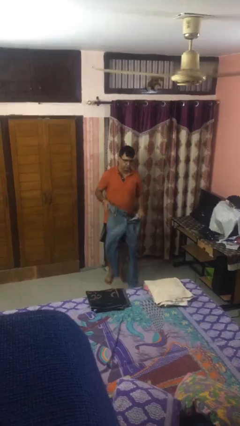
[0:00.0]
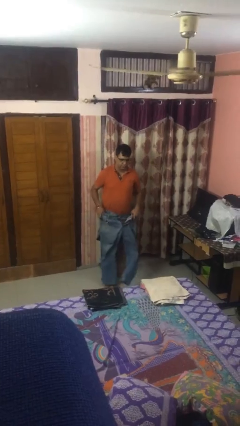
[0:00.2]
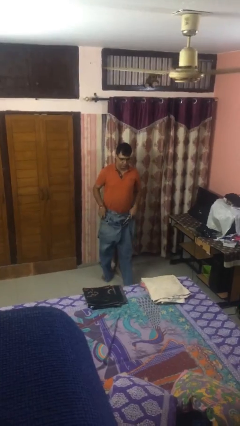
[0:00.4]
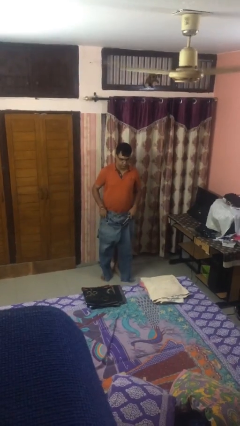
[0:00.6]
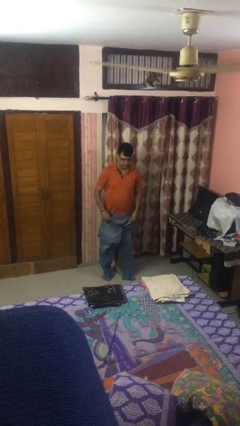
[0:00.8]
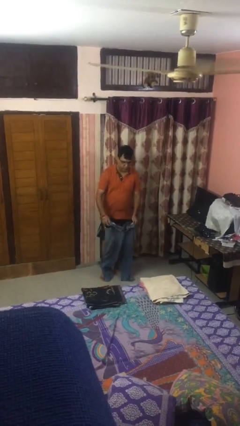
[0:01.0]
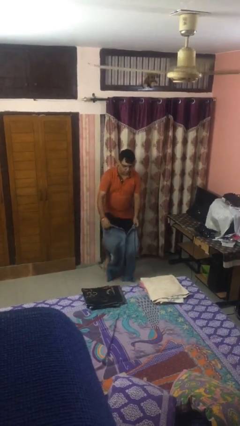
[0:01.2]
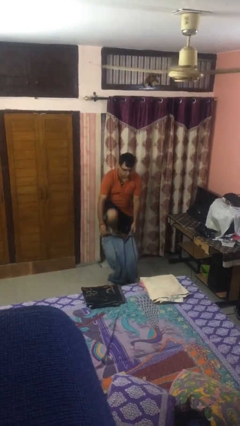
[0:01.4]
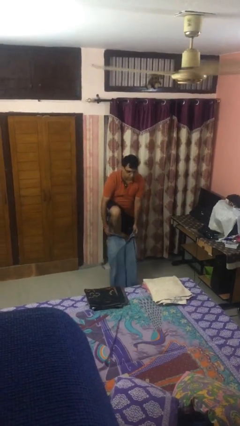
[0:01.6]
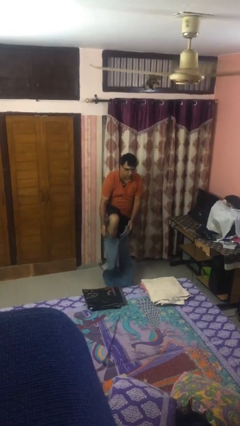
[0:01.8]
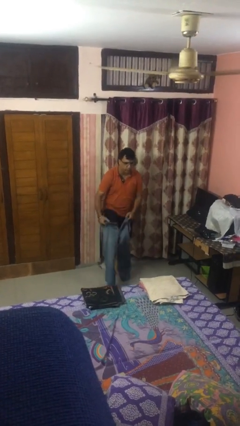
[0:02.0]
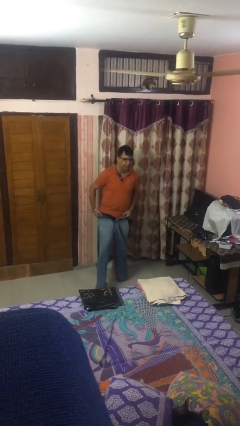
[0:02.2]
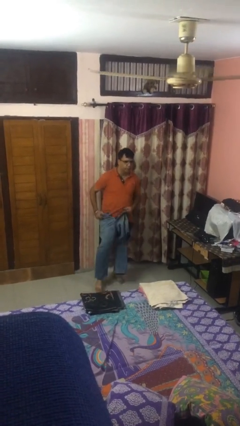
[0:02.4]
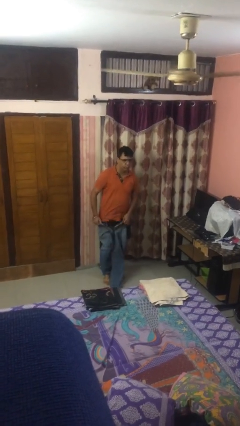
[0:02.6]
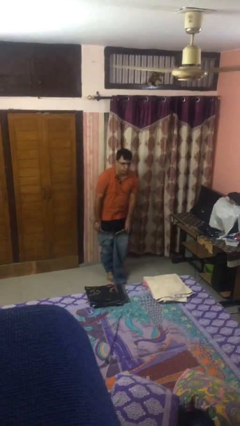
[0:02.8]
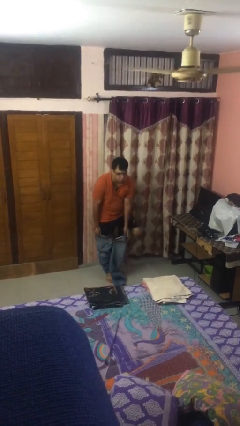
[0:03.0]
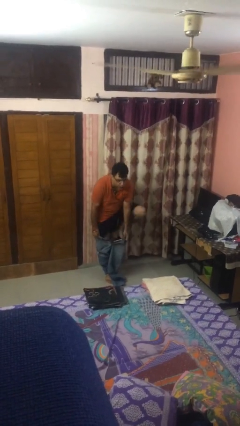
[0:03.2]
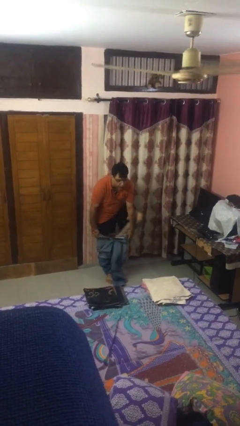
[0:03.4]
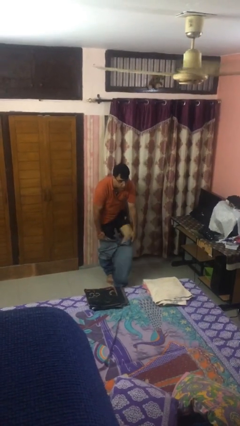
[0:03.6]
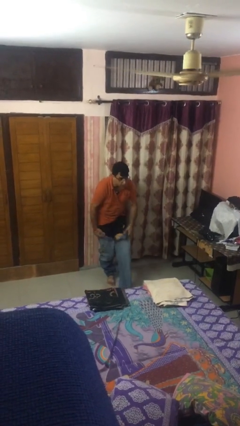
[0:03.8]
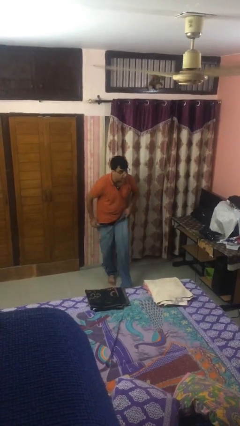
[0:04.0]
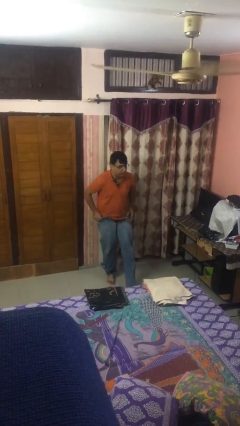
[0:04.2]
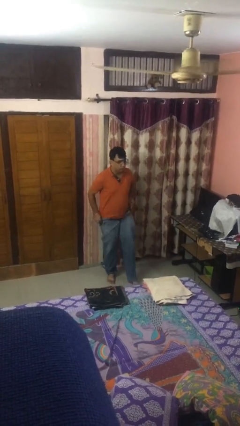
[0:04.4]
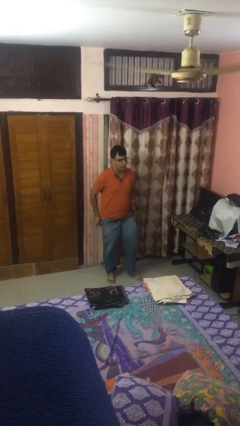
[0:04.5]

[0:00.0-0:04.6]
person puts on pants

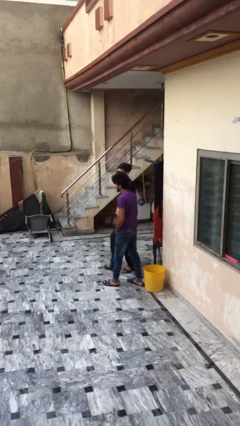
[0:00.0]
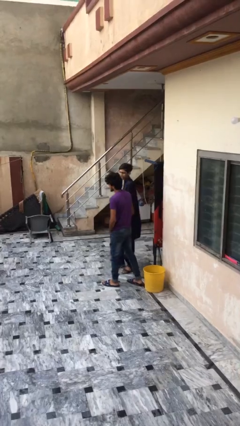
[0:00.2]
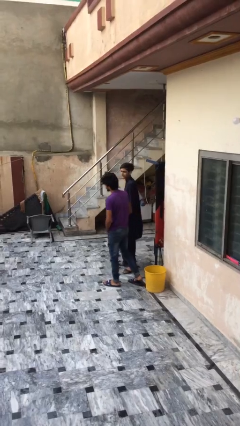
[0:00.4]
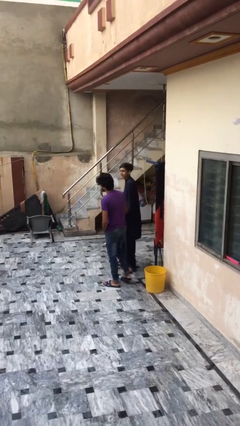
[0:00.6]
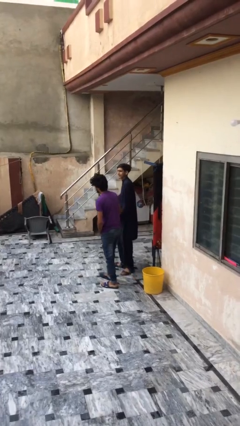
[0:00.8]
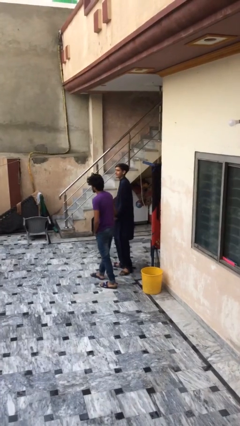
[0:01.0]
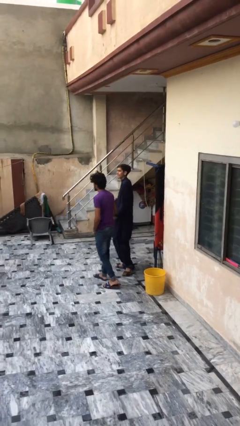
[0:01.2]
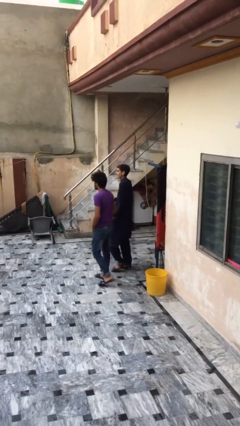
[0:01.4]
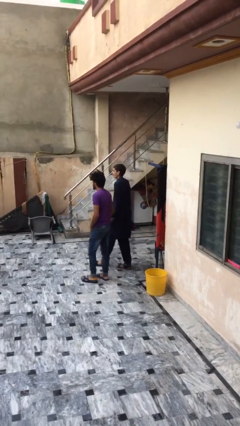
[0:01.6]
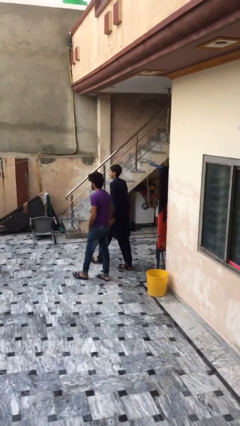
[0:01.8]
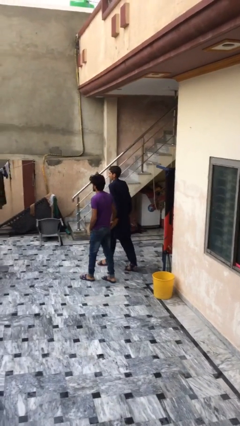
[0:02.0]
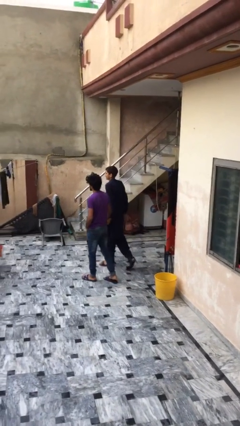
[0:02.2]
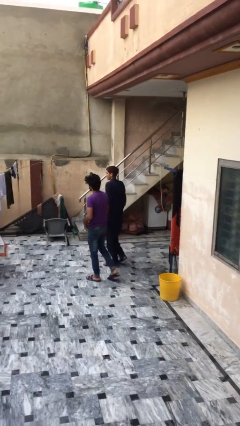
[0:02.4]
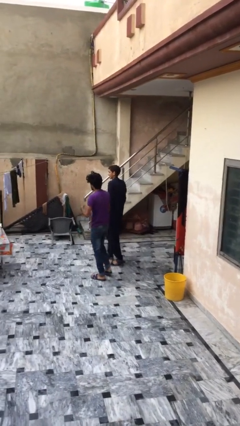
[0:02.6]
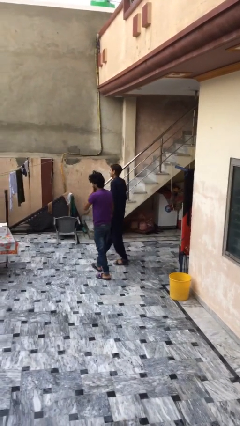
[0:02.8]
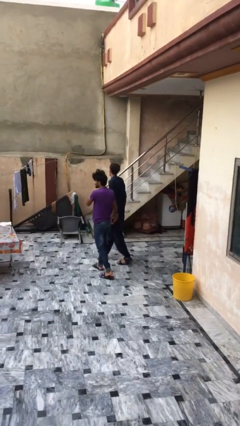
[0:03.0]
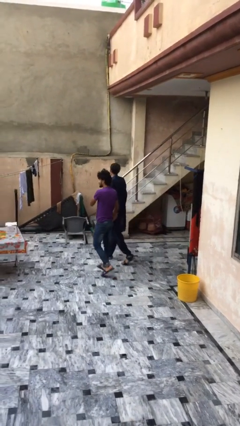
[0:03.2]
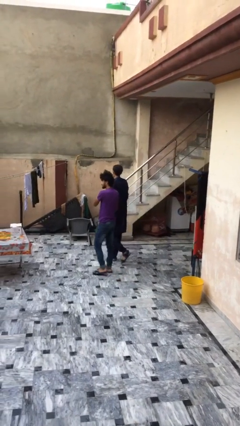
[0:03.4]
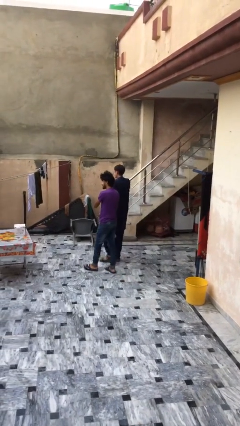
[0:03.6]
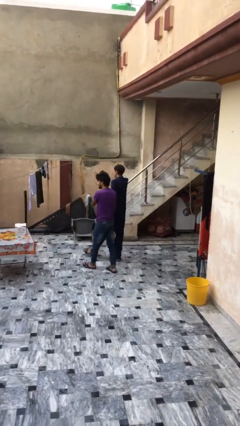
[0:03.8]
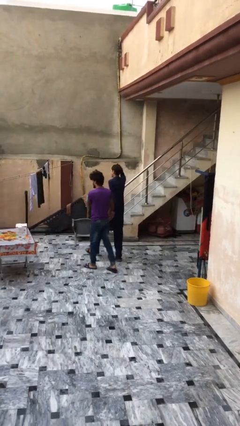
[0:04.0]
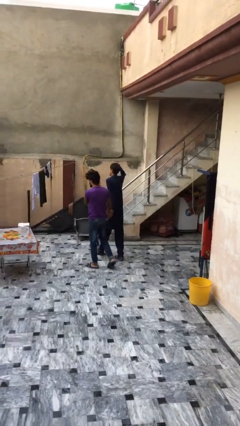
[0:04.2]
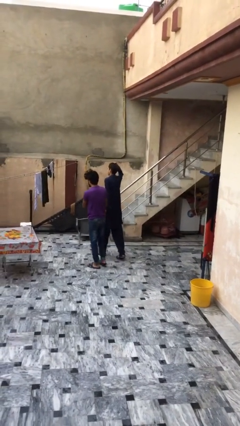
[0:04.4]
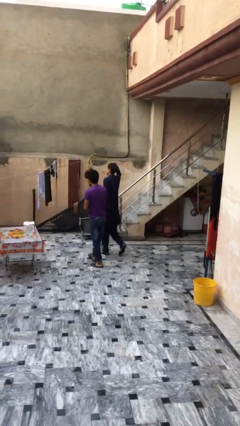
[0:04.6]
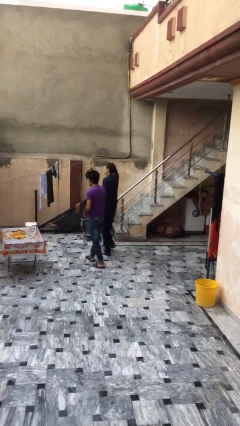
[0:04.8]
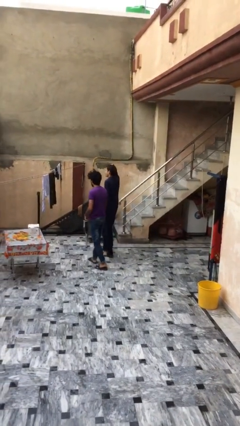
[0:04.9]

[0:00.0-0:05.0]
person talks to person

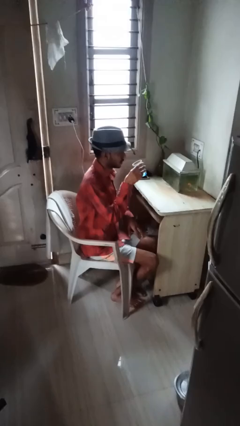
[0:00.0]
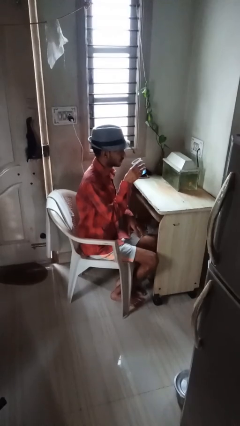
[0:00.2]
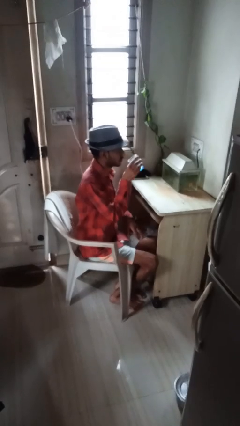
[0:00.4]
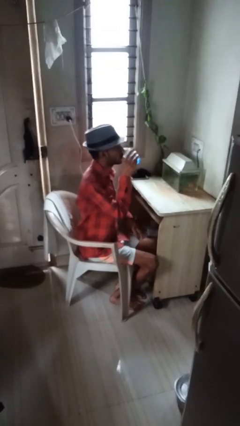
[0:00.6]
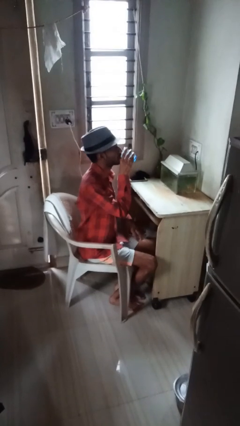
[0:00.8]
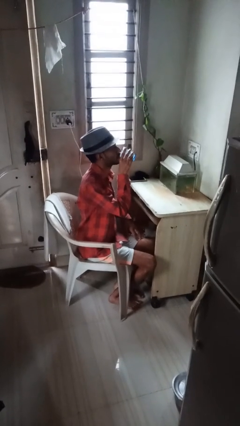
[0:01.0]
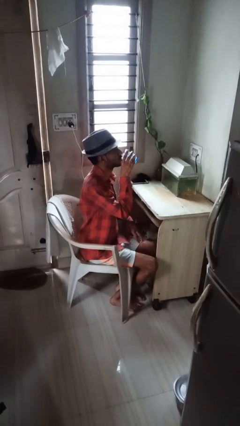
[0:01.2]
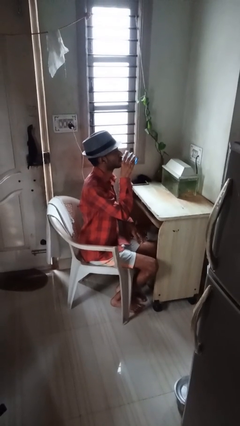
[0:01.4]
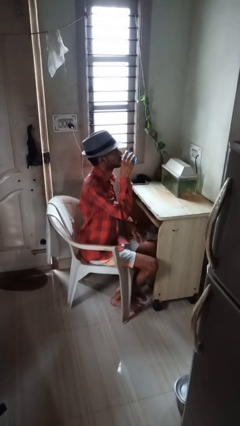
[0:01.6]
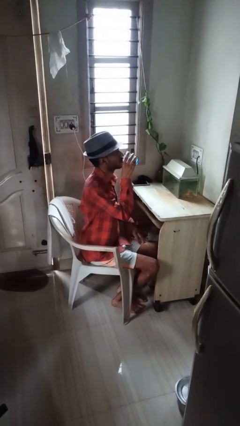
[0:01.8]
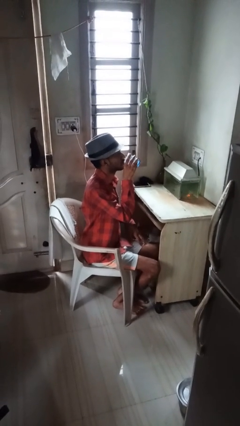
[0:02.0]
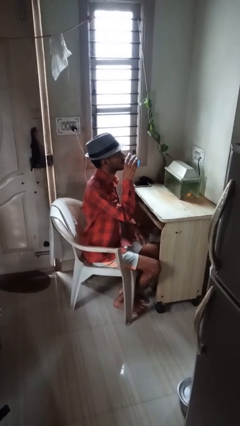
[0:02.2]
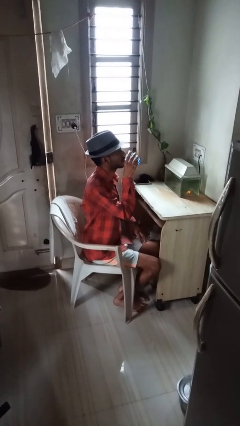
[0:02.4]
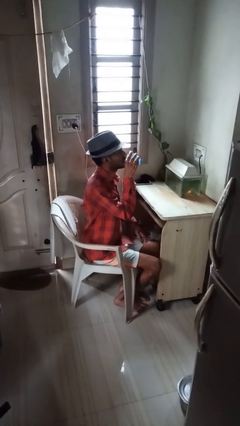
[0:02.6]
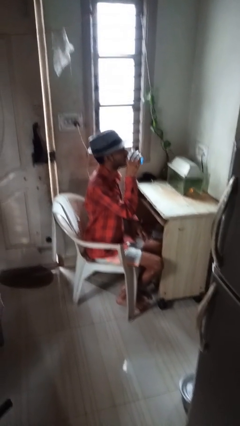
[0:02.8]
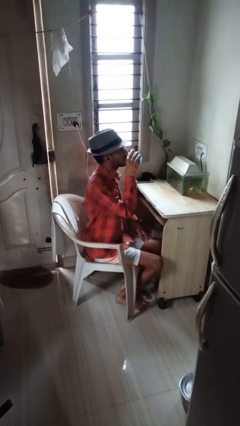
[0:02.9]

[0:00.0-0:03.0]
person drinks from shotglass

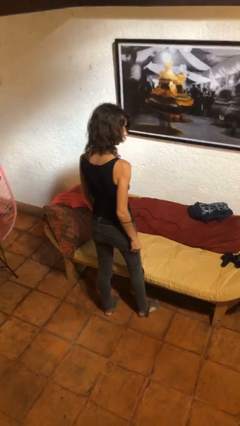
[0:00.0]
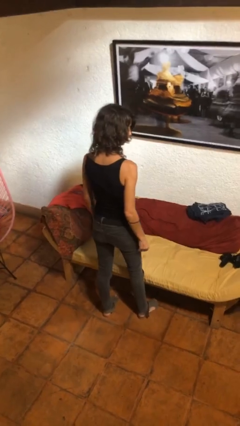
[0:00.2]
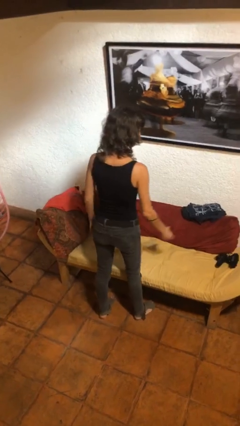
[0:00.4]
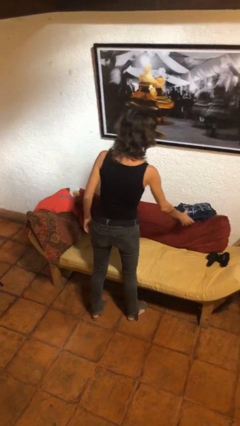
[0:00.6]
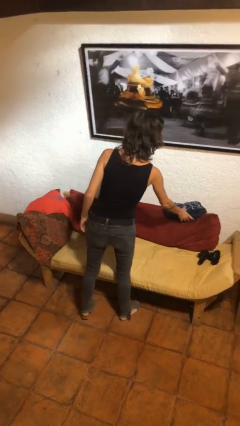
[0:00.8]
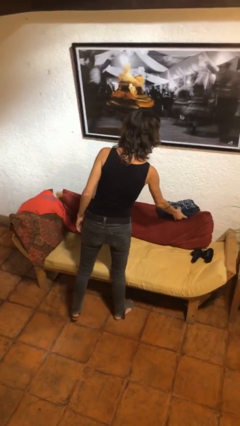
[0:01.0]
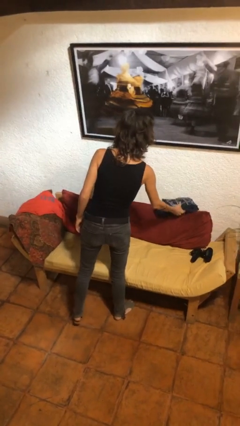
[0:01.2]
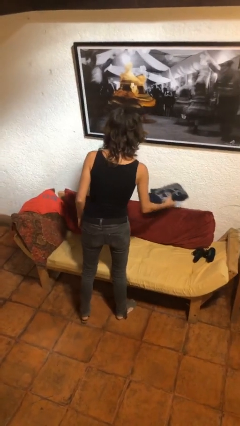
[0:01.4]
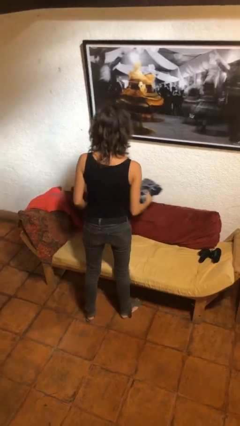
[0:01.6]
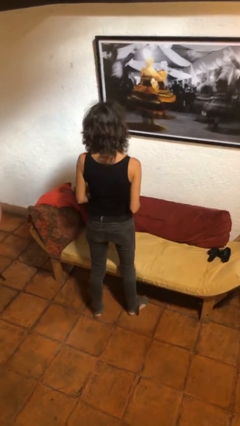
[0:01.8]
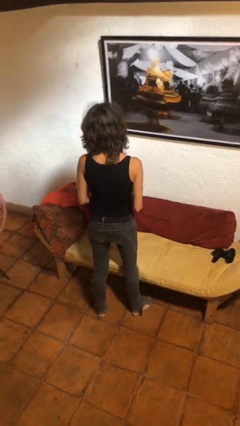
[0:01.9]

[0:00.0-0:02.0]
person picks up object from couch

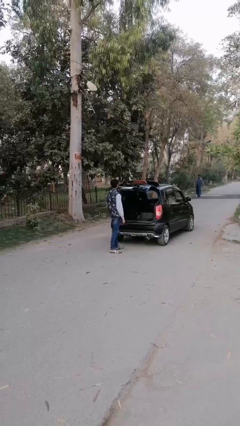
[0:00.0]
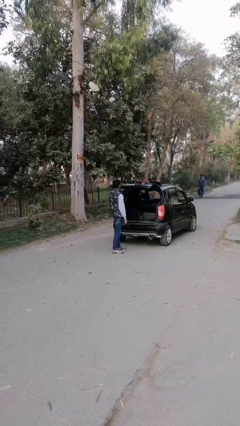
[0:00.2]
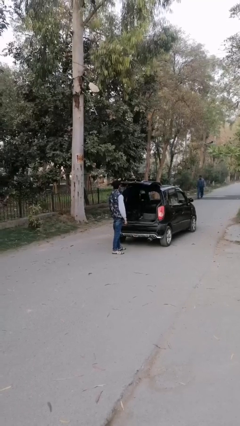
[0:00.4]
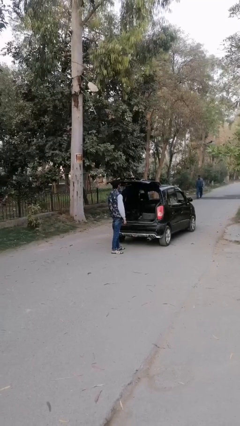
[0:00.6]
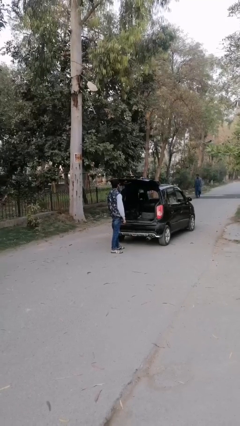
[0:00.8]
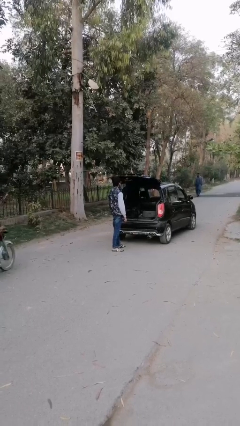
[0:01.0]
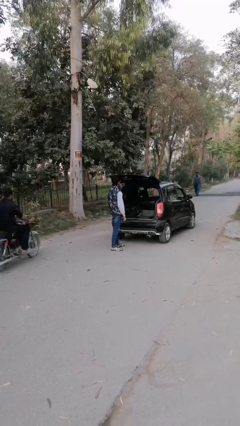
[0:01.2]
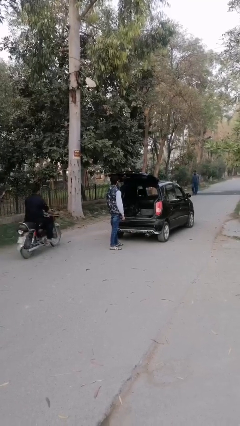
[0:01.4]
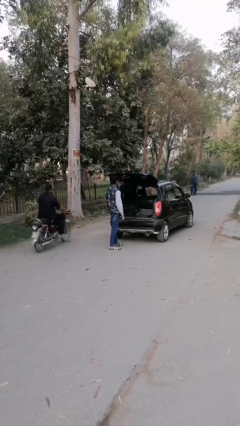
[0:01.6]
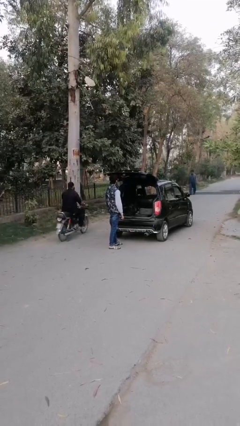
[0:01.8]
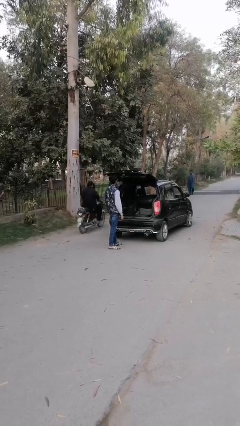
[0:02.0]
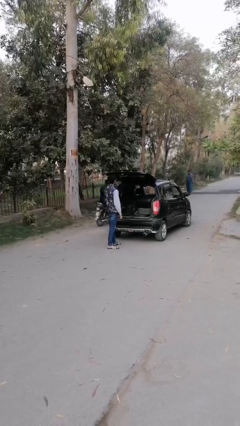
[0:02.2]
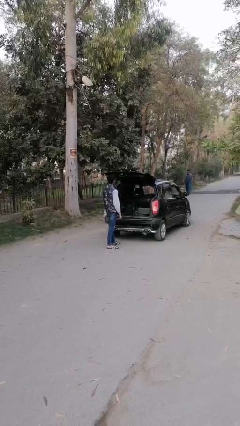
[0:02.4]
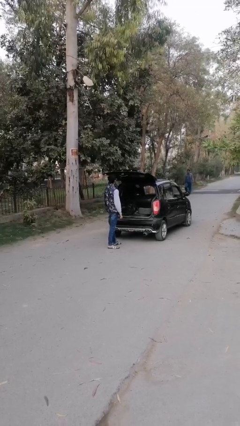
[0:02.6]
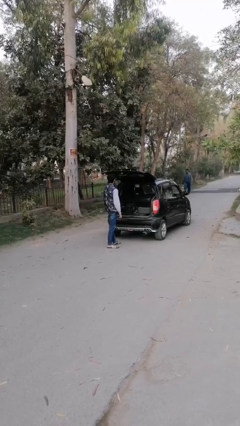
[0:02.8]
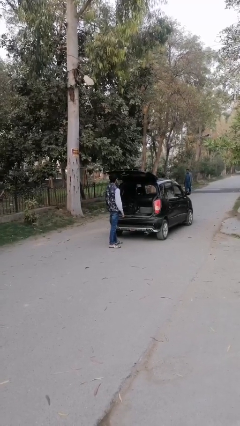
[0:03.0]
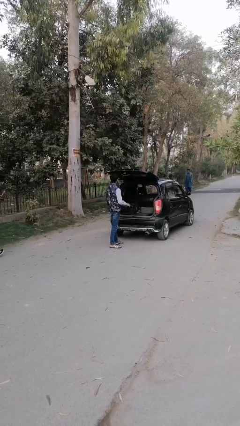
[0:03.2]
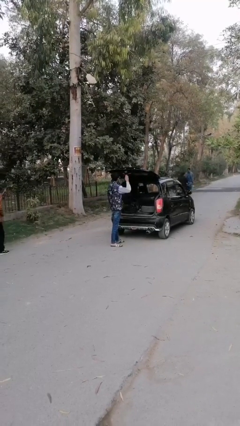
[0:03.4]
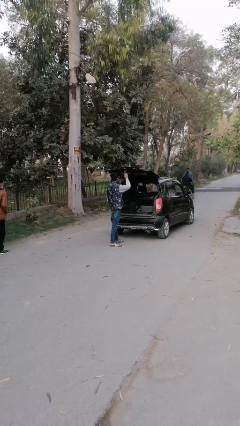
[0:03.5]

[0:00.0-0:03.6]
person opens car trunk
